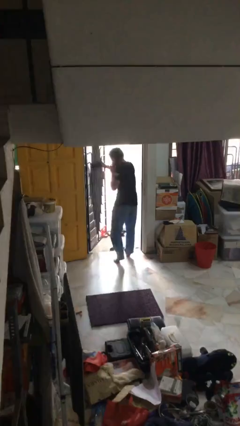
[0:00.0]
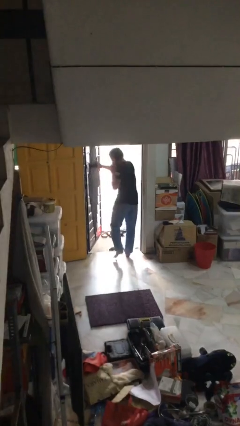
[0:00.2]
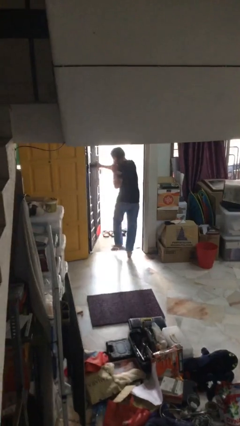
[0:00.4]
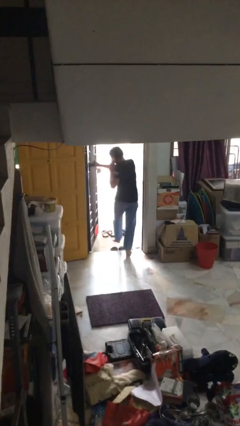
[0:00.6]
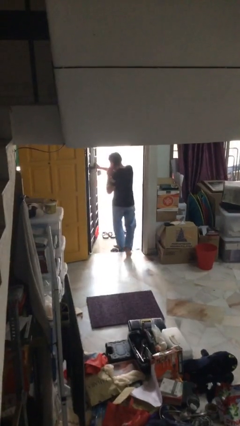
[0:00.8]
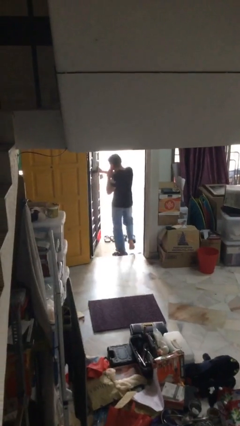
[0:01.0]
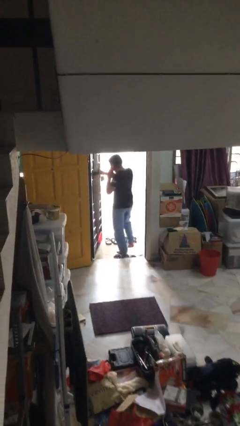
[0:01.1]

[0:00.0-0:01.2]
person exits scene through structure

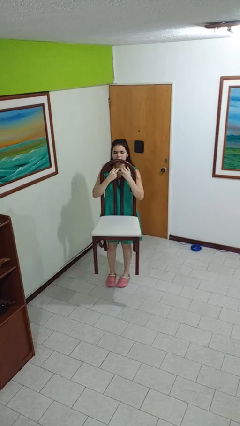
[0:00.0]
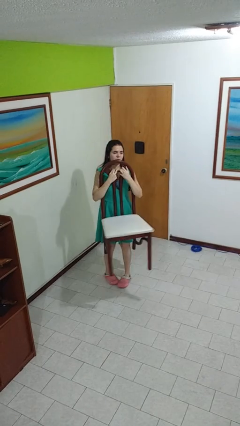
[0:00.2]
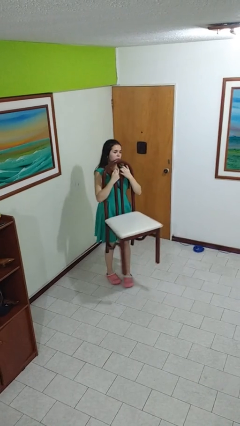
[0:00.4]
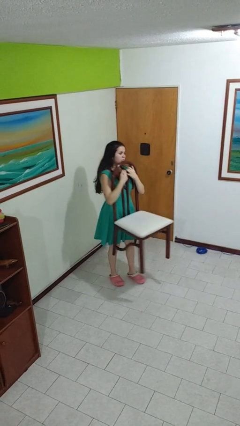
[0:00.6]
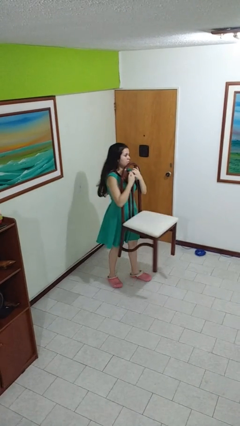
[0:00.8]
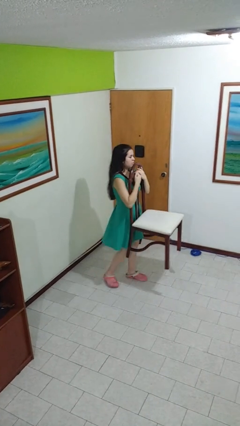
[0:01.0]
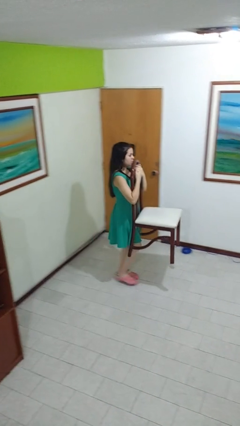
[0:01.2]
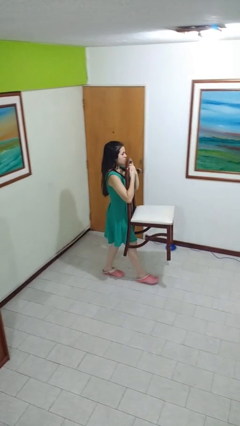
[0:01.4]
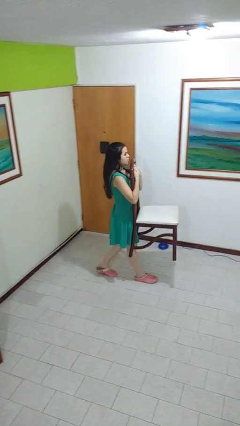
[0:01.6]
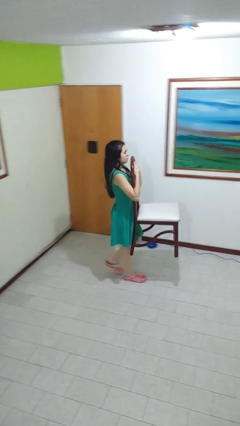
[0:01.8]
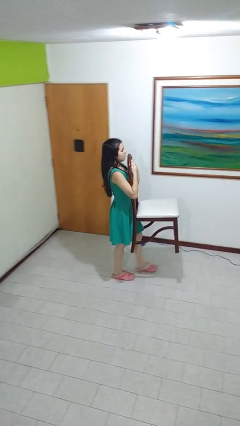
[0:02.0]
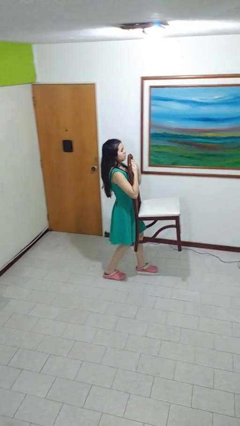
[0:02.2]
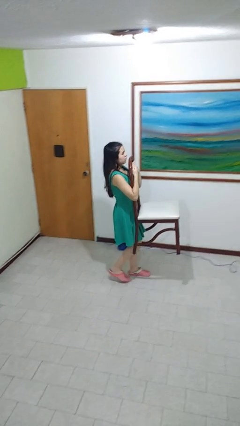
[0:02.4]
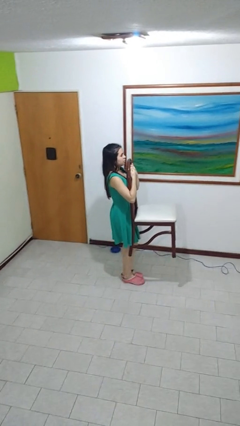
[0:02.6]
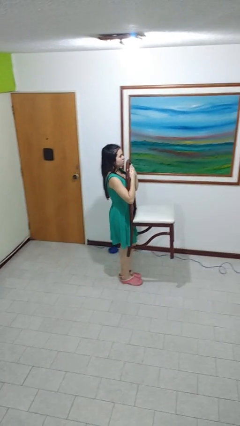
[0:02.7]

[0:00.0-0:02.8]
person carries furniture

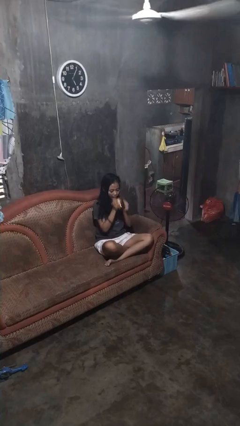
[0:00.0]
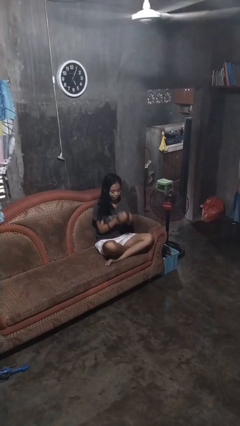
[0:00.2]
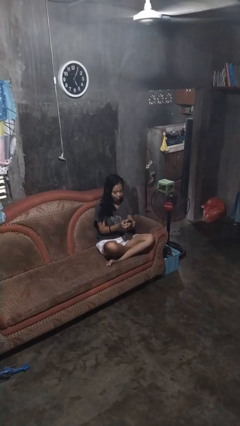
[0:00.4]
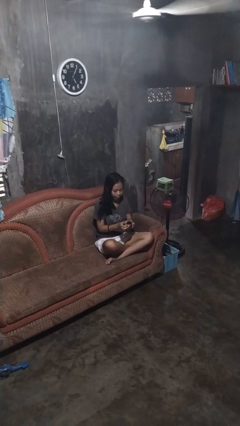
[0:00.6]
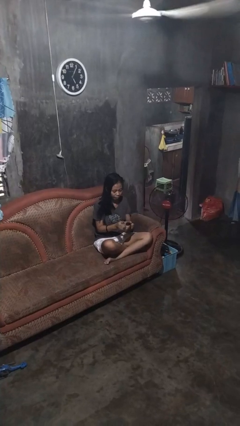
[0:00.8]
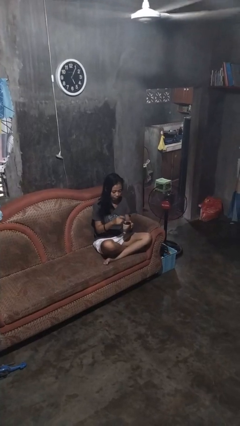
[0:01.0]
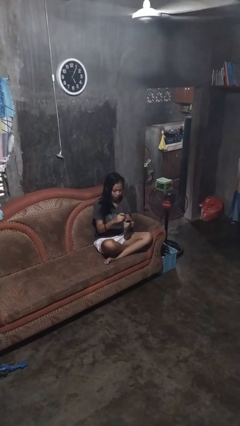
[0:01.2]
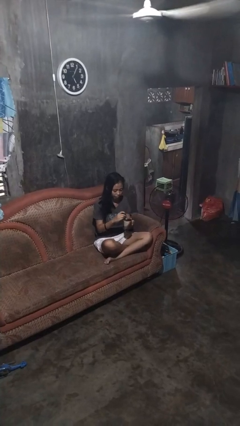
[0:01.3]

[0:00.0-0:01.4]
person stirs mug

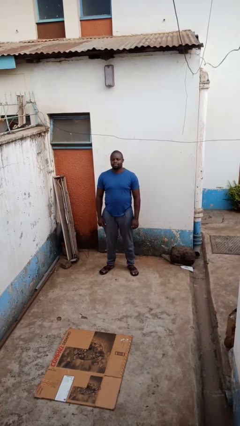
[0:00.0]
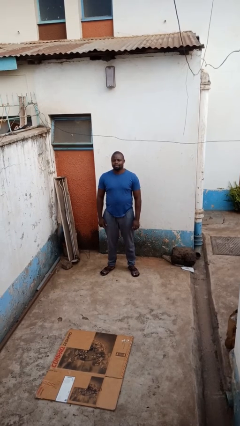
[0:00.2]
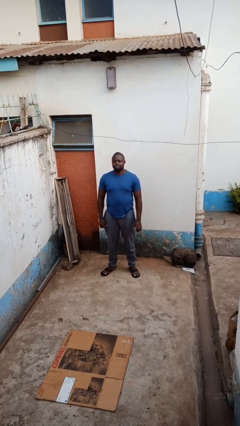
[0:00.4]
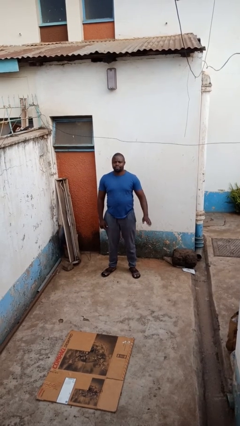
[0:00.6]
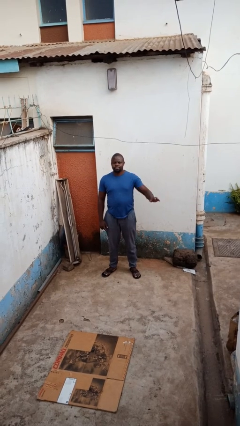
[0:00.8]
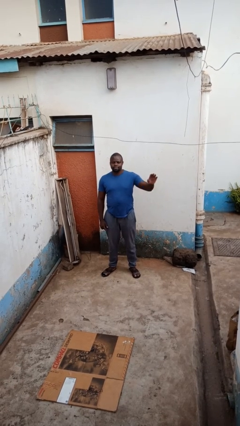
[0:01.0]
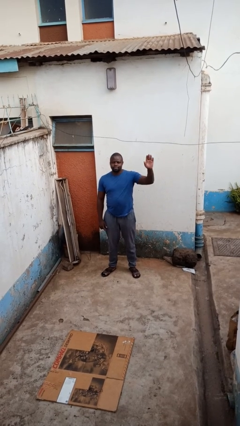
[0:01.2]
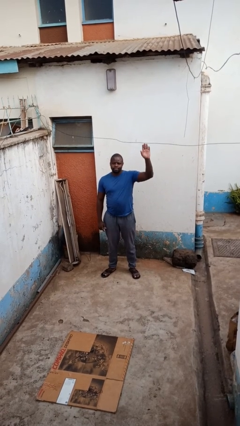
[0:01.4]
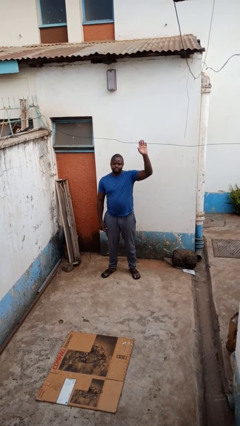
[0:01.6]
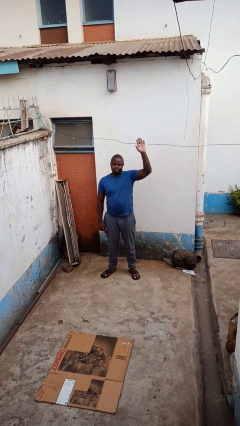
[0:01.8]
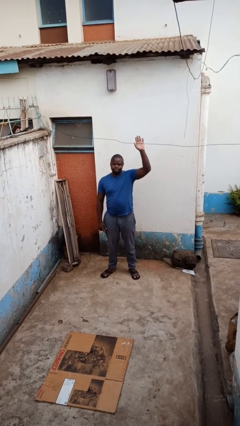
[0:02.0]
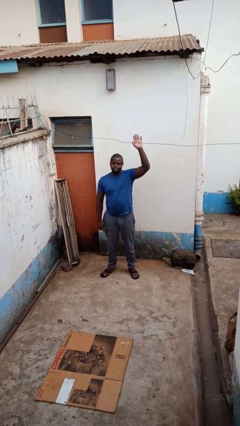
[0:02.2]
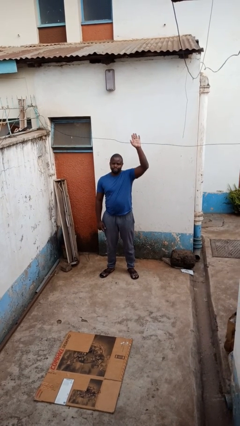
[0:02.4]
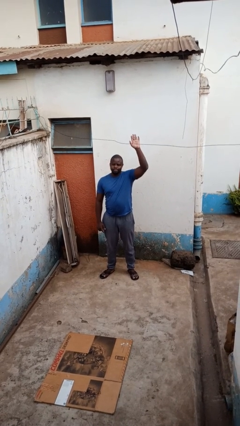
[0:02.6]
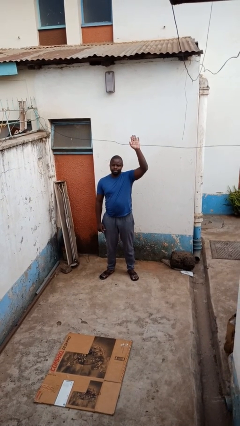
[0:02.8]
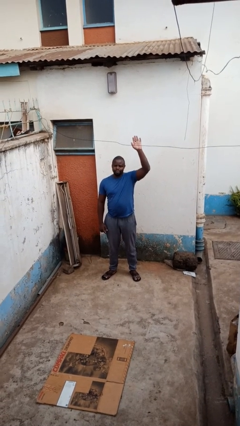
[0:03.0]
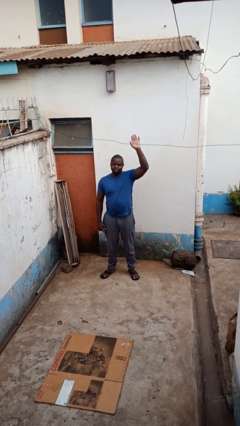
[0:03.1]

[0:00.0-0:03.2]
person gestures raise hand

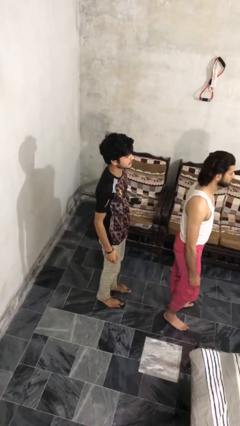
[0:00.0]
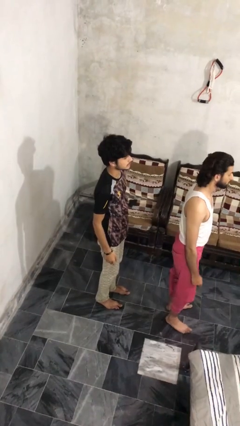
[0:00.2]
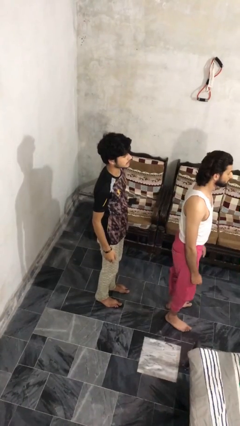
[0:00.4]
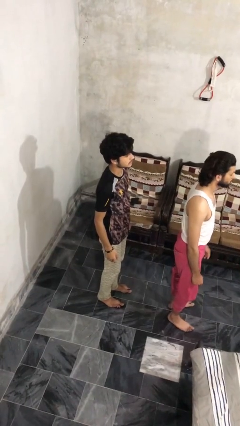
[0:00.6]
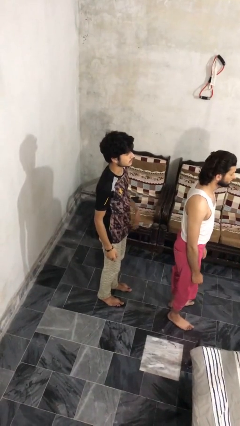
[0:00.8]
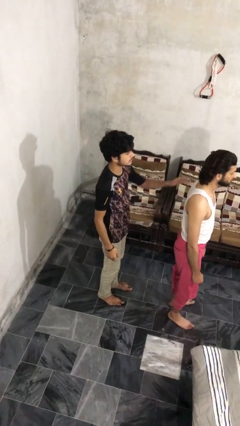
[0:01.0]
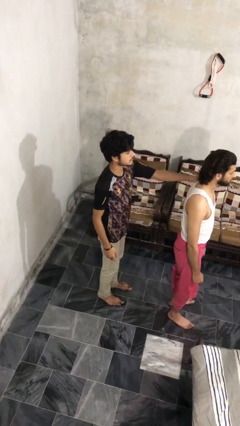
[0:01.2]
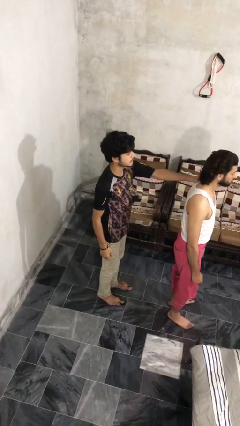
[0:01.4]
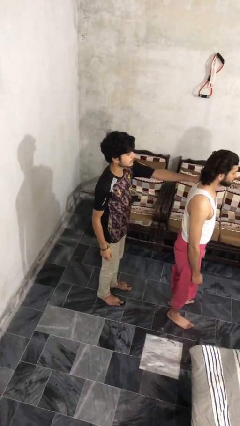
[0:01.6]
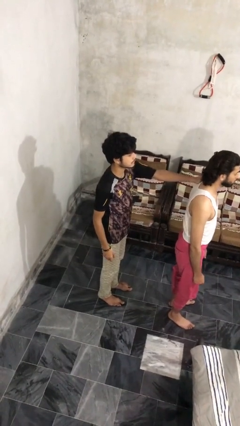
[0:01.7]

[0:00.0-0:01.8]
person grabs person by shoulder

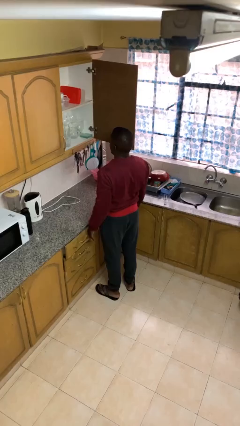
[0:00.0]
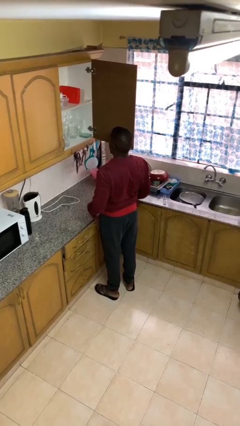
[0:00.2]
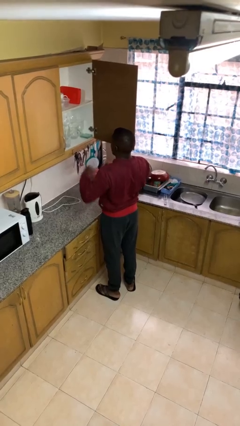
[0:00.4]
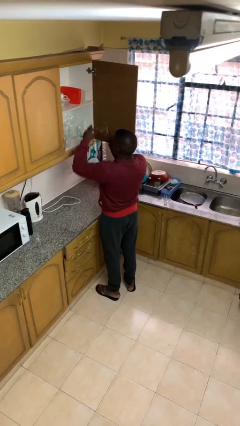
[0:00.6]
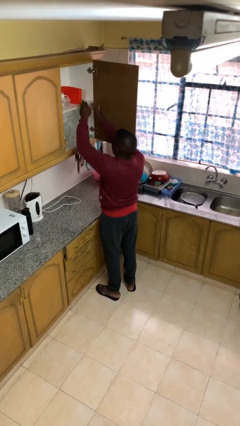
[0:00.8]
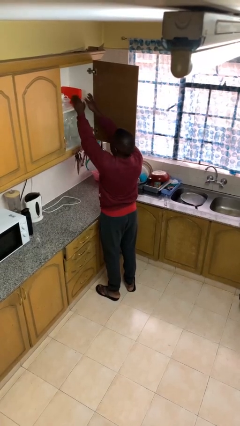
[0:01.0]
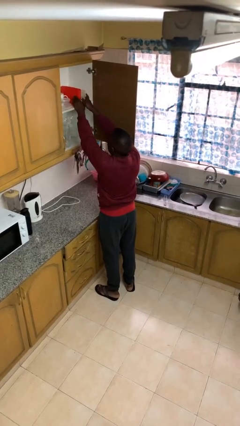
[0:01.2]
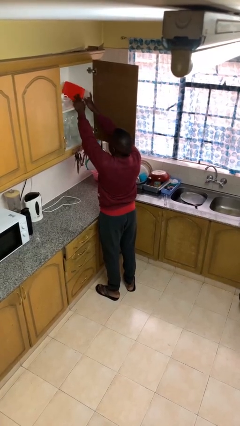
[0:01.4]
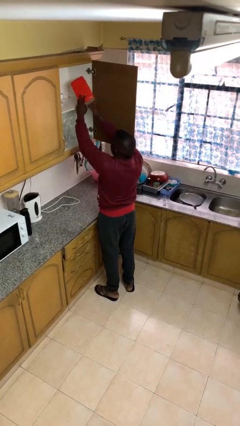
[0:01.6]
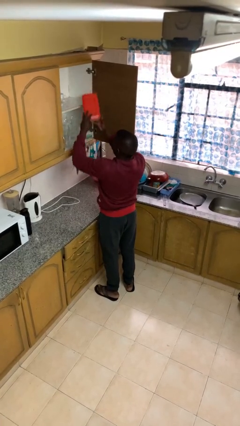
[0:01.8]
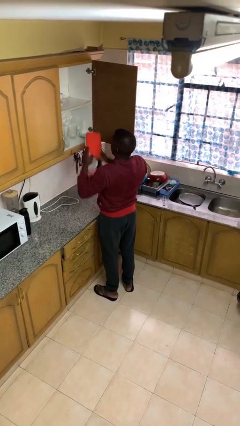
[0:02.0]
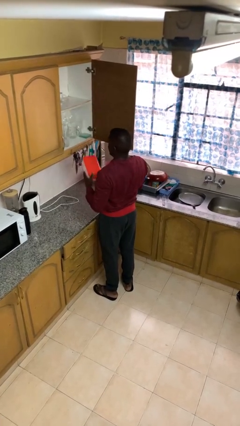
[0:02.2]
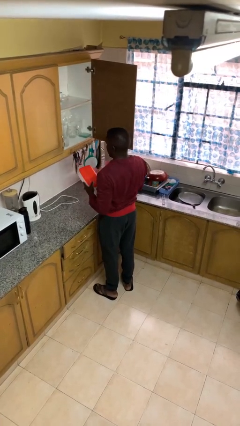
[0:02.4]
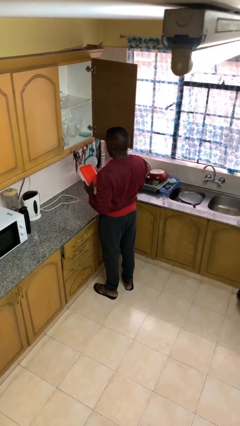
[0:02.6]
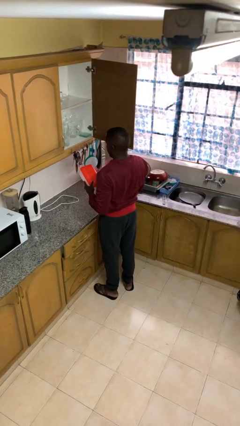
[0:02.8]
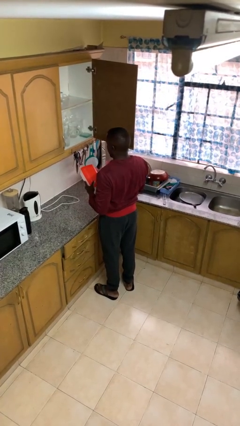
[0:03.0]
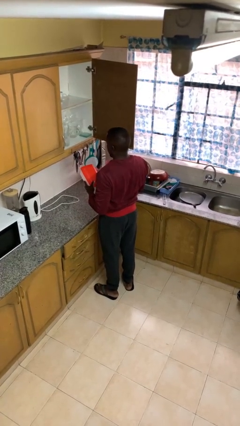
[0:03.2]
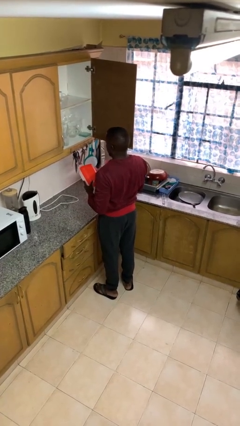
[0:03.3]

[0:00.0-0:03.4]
person picks up object from cabinet

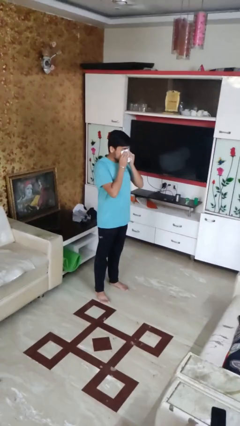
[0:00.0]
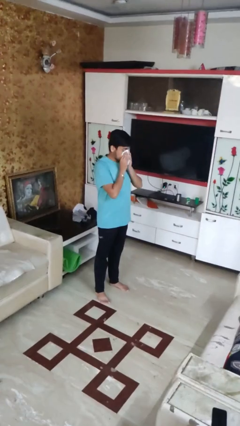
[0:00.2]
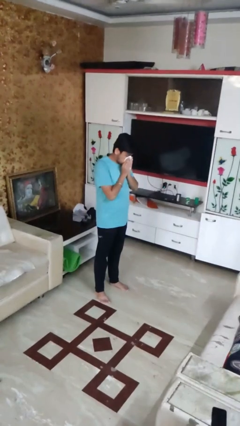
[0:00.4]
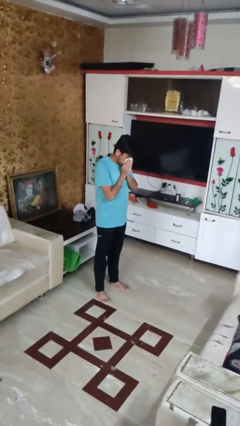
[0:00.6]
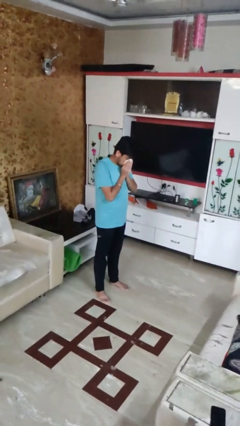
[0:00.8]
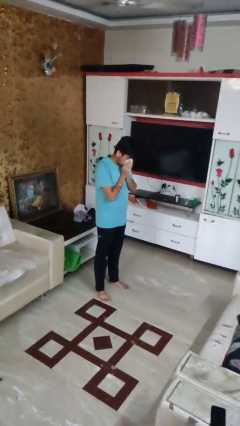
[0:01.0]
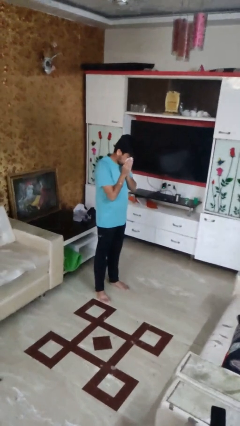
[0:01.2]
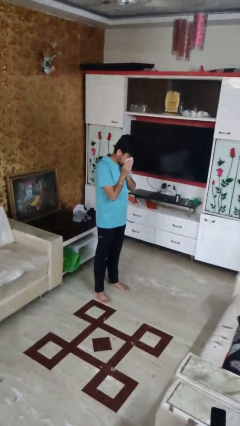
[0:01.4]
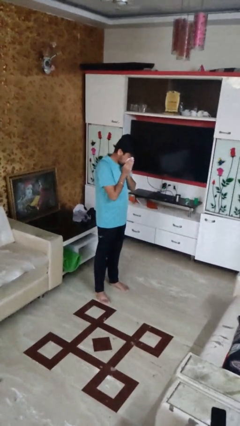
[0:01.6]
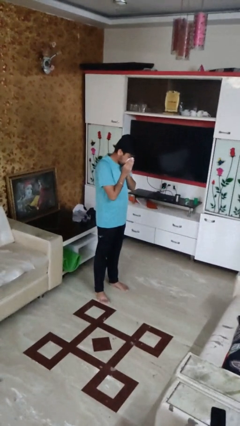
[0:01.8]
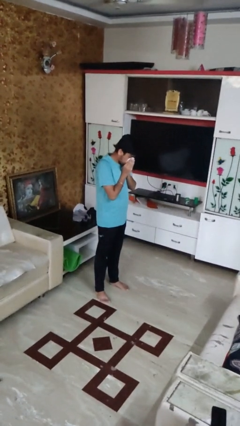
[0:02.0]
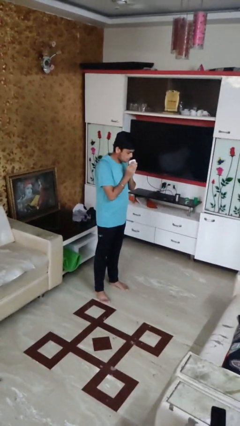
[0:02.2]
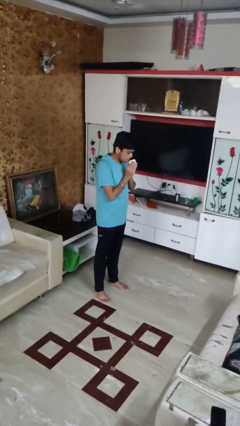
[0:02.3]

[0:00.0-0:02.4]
person blows nose

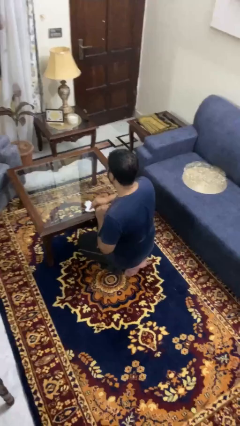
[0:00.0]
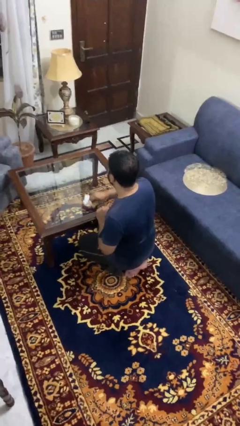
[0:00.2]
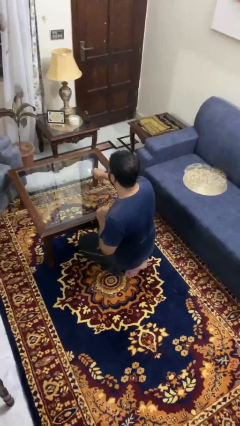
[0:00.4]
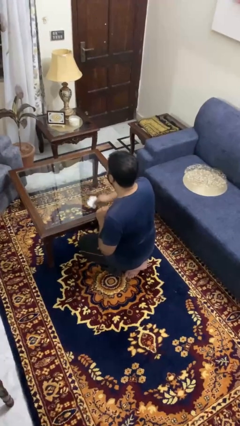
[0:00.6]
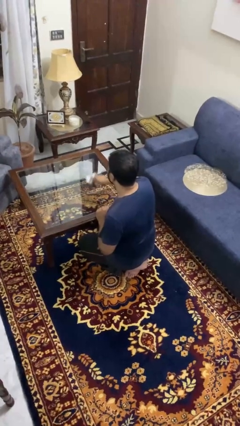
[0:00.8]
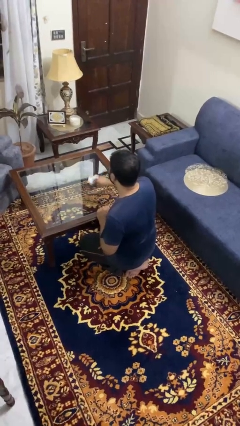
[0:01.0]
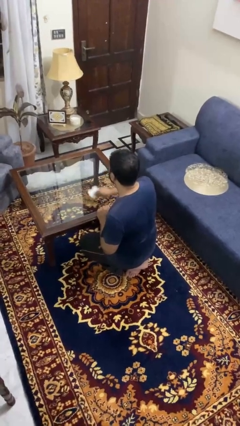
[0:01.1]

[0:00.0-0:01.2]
person cleans table with rag
